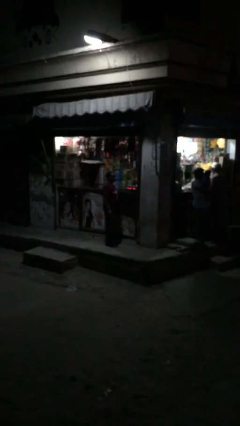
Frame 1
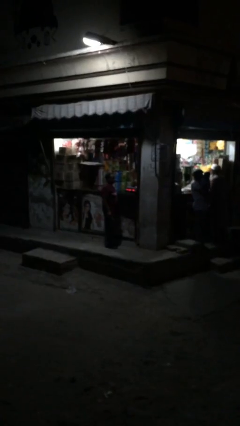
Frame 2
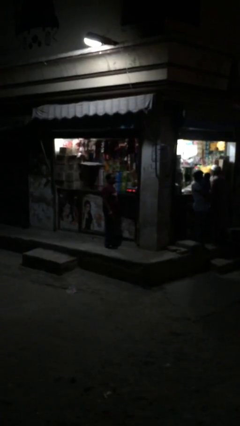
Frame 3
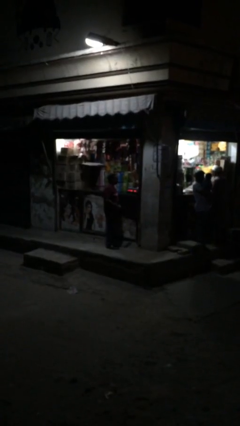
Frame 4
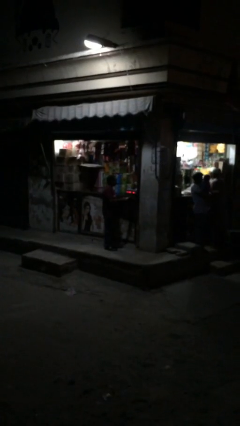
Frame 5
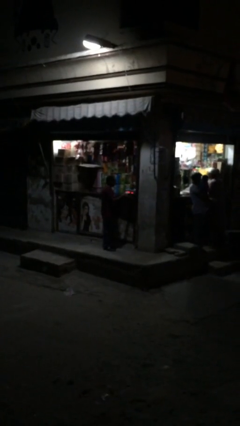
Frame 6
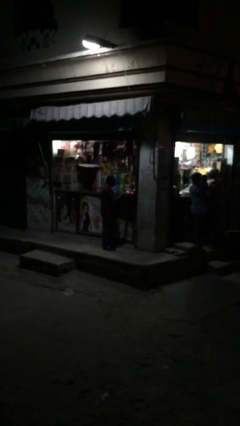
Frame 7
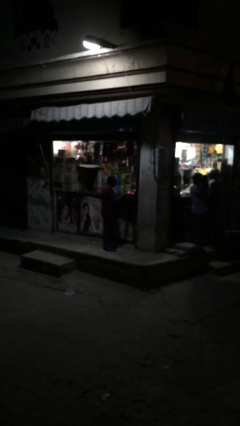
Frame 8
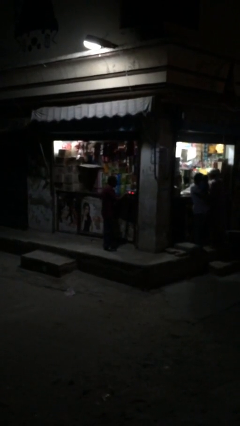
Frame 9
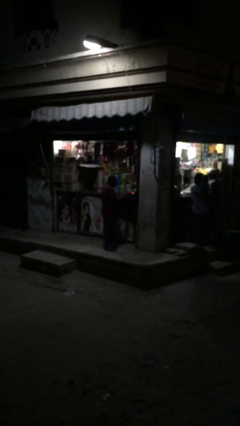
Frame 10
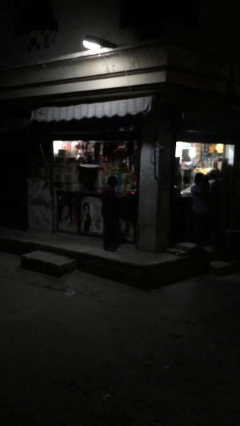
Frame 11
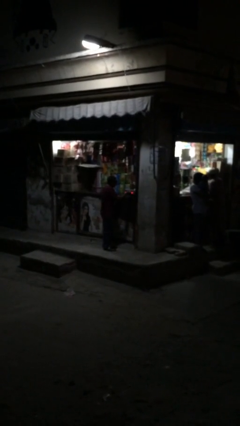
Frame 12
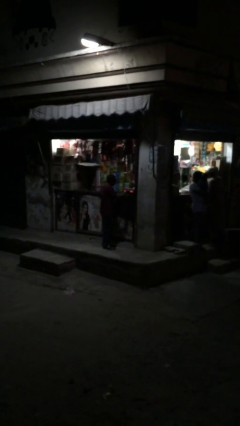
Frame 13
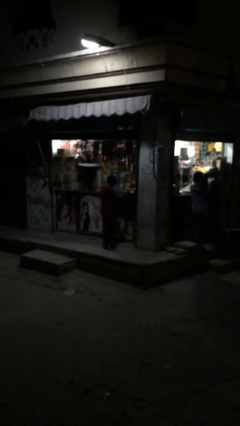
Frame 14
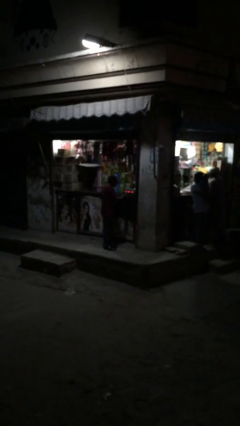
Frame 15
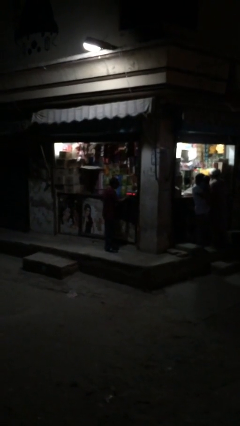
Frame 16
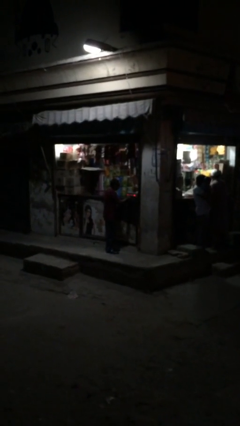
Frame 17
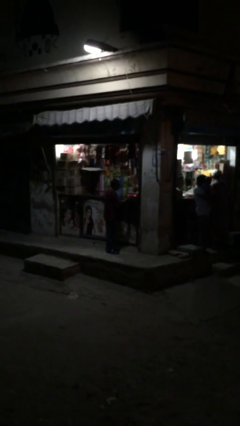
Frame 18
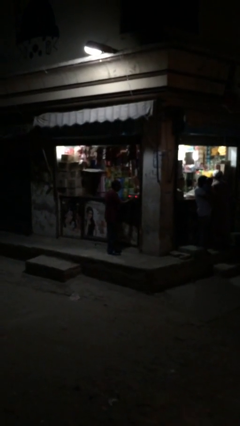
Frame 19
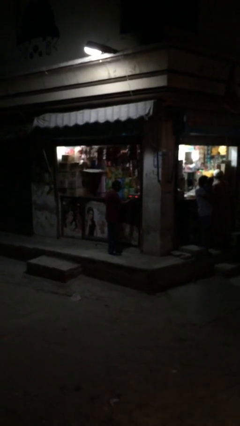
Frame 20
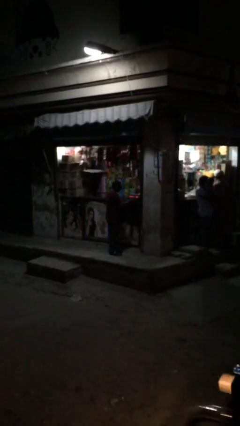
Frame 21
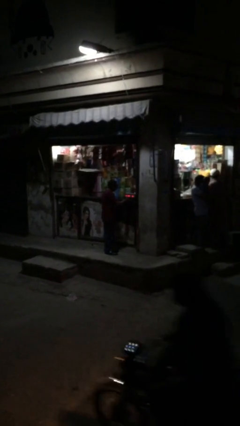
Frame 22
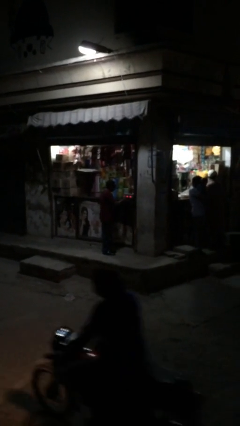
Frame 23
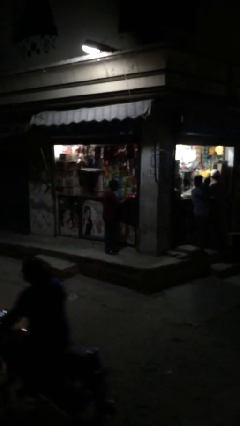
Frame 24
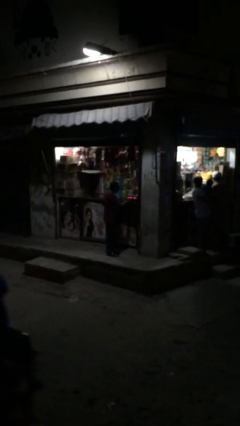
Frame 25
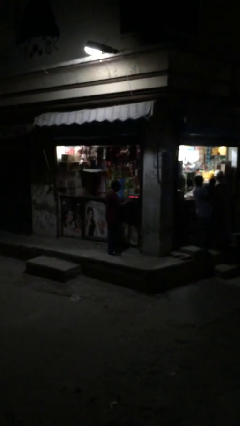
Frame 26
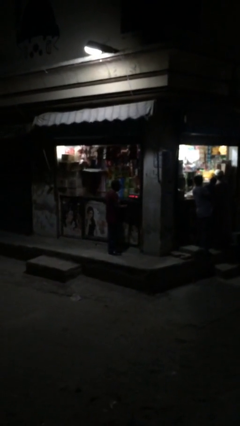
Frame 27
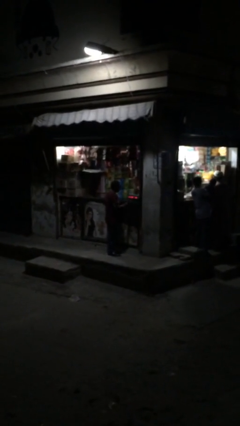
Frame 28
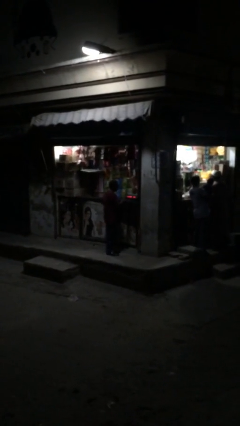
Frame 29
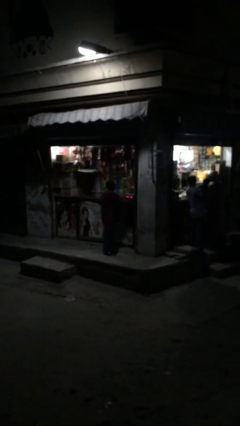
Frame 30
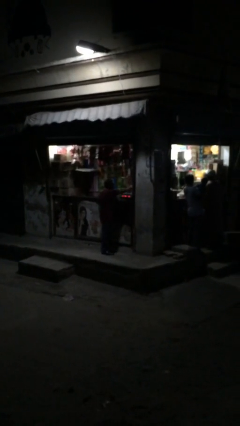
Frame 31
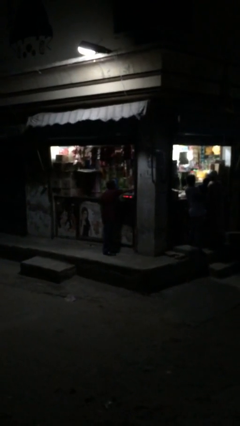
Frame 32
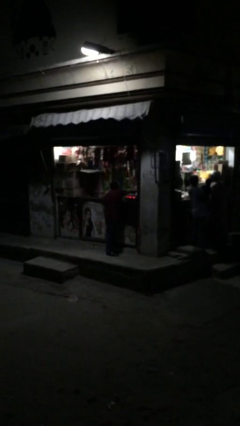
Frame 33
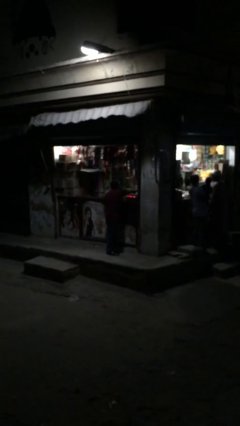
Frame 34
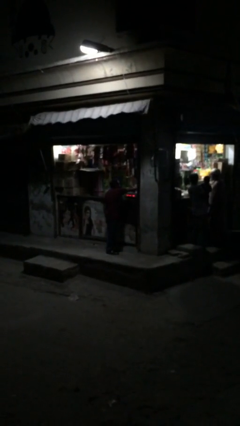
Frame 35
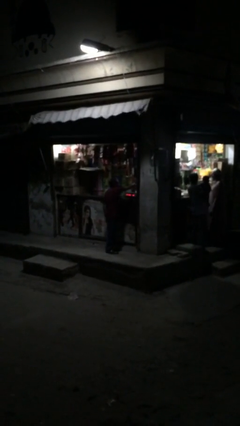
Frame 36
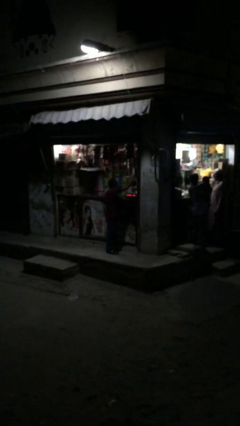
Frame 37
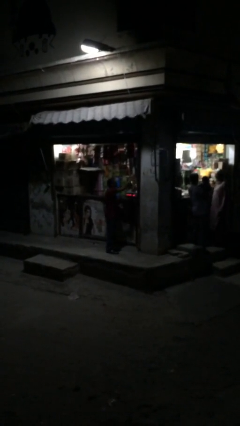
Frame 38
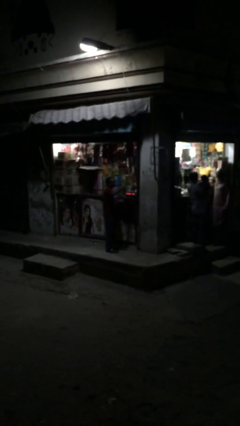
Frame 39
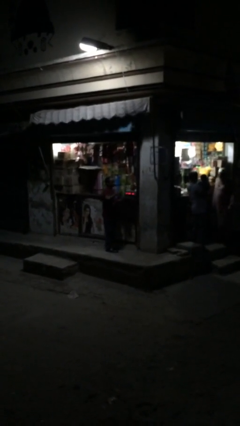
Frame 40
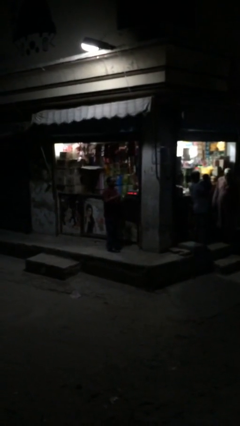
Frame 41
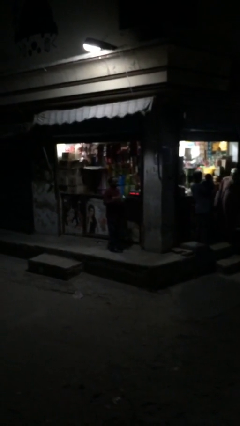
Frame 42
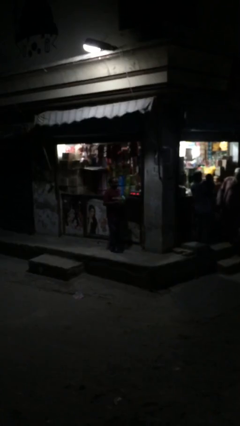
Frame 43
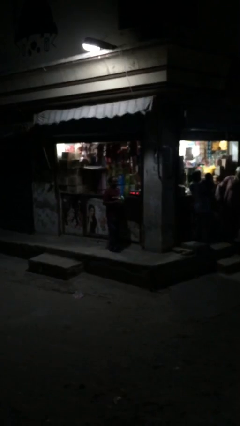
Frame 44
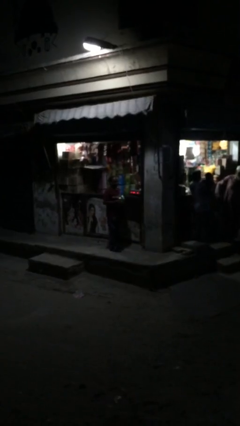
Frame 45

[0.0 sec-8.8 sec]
person purchases from machine

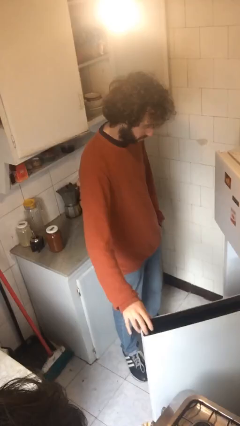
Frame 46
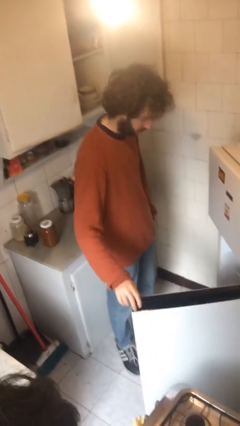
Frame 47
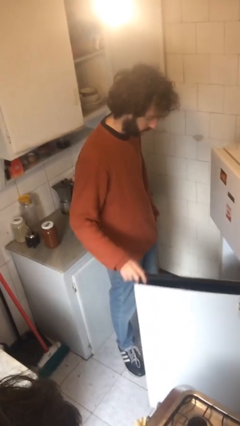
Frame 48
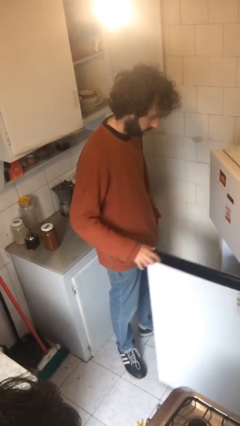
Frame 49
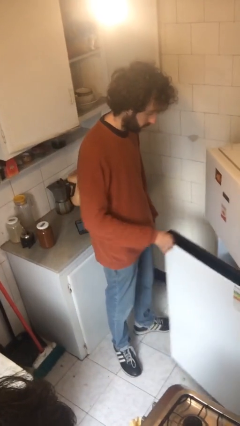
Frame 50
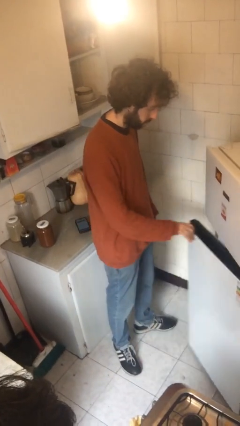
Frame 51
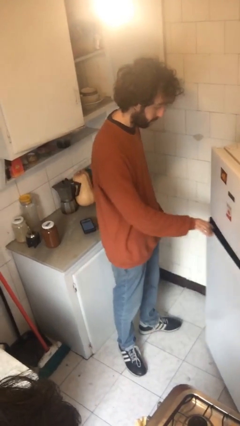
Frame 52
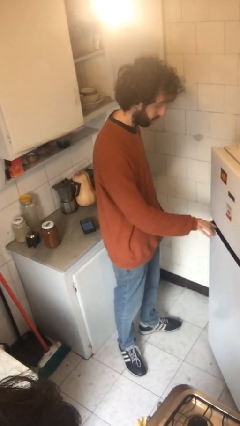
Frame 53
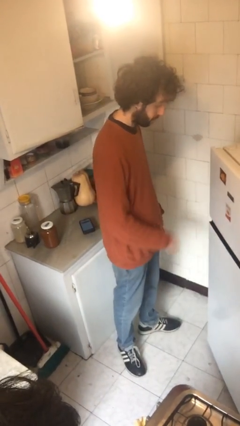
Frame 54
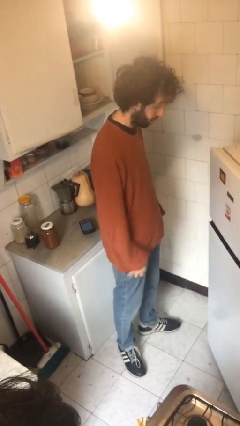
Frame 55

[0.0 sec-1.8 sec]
person closes refrigerator

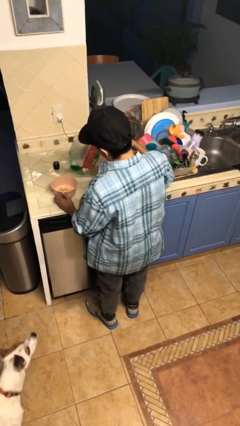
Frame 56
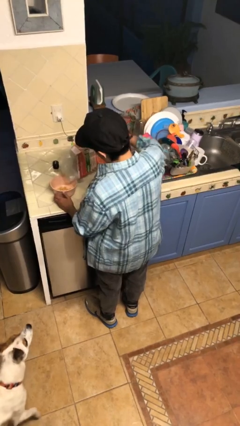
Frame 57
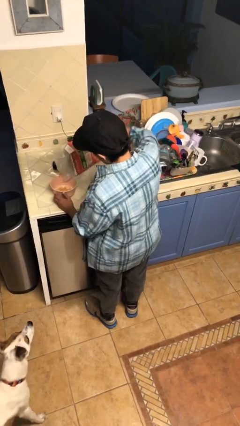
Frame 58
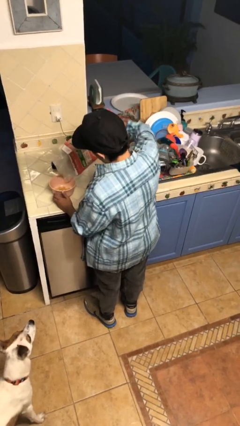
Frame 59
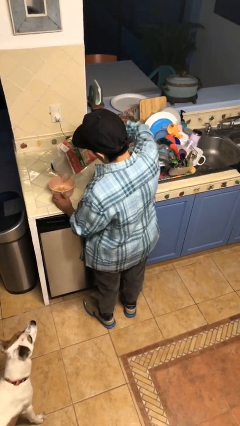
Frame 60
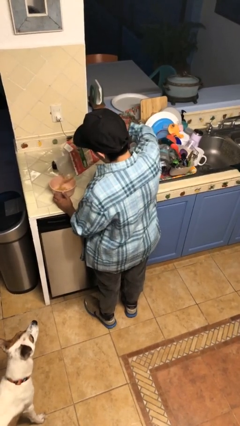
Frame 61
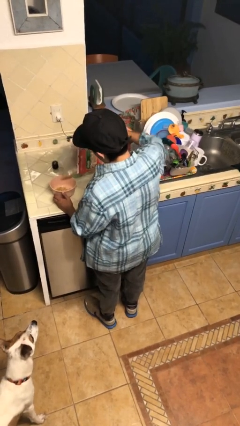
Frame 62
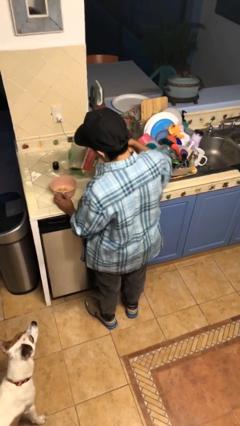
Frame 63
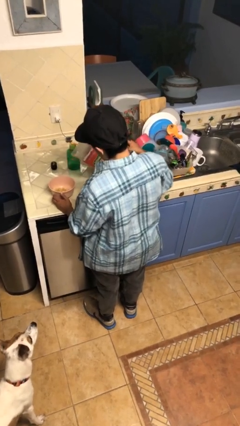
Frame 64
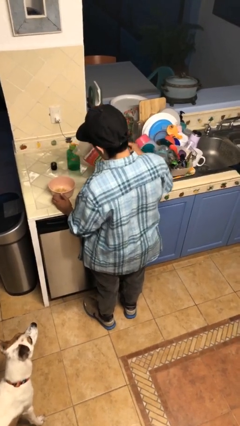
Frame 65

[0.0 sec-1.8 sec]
person pours into bowl

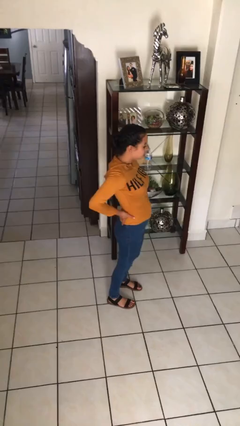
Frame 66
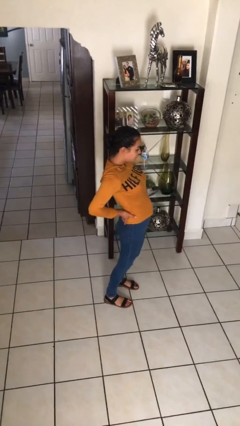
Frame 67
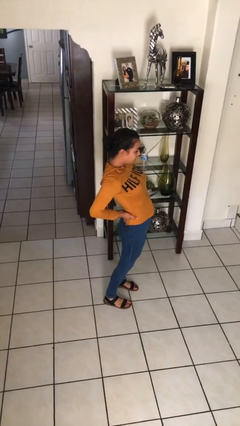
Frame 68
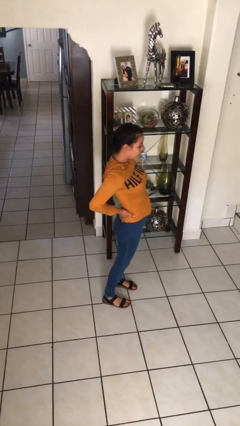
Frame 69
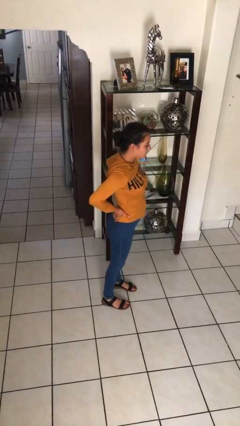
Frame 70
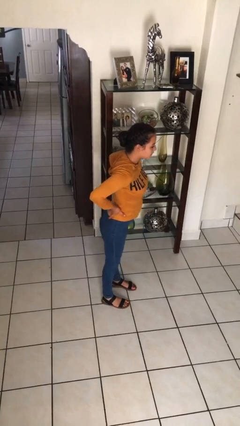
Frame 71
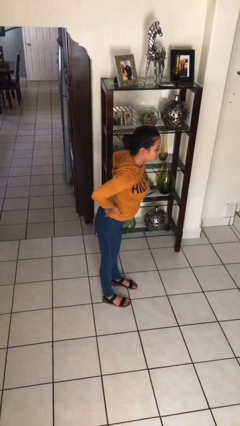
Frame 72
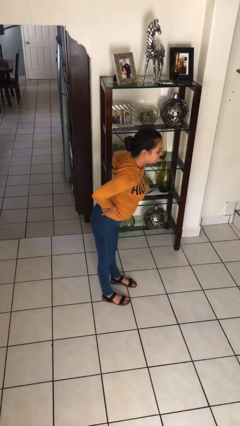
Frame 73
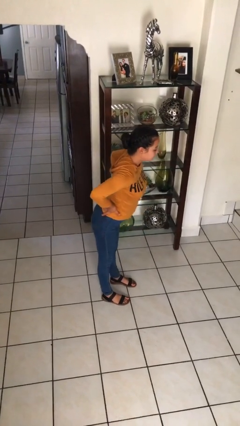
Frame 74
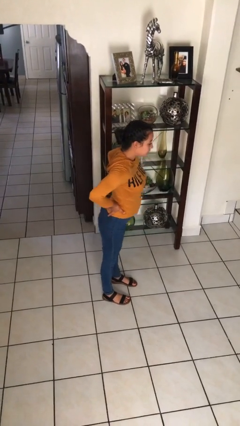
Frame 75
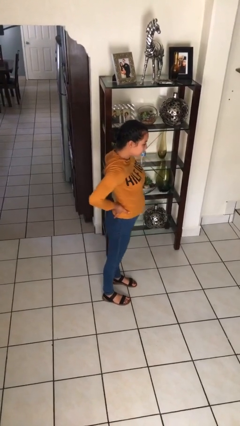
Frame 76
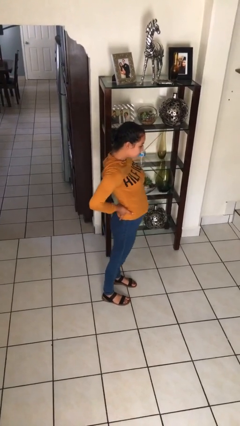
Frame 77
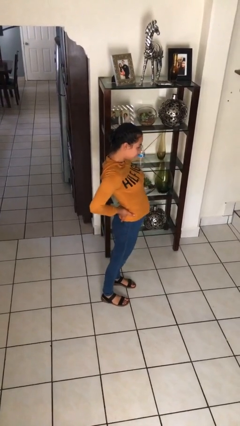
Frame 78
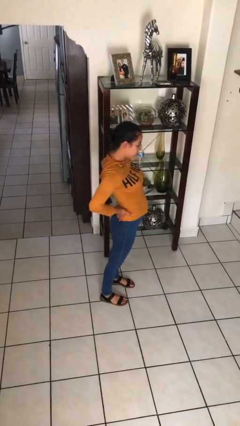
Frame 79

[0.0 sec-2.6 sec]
person wiggles hips

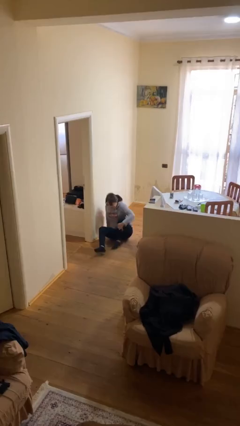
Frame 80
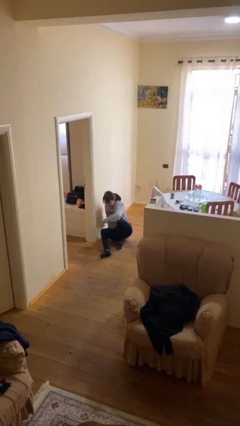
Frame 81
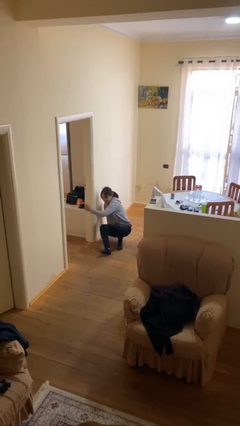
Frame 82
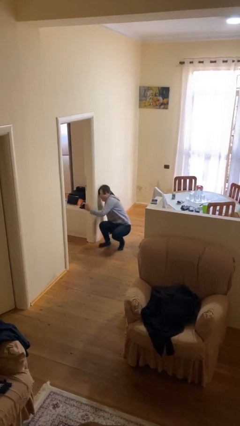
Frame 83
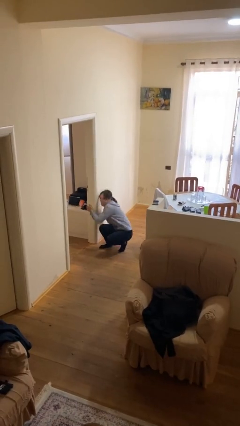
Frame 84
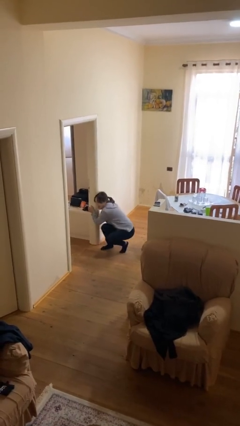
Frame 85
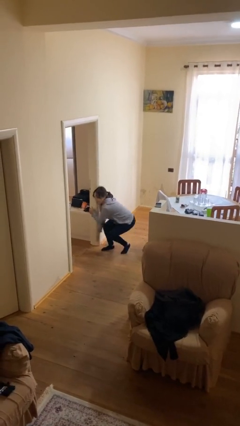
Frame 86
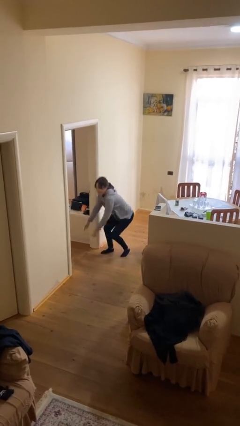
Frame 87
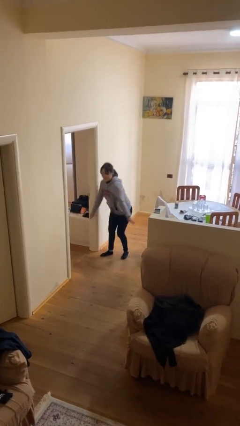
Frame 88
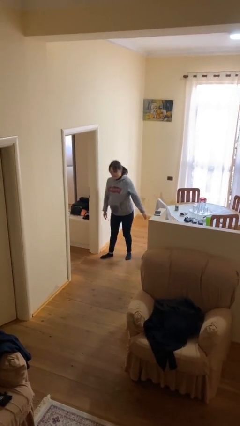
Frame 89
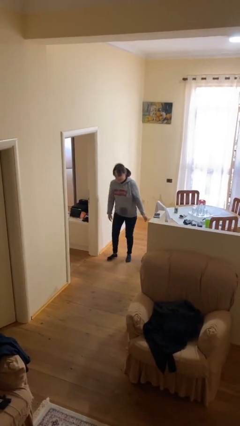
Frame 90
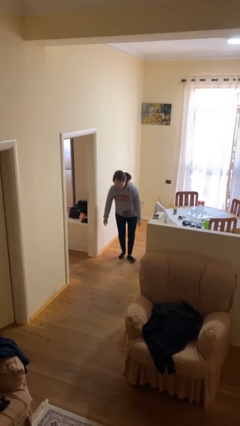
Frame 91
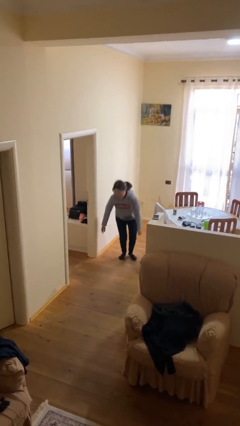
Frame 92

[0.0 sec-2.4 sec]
person stands up
